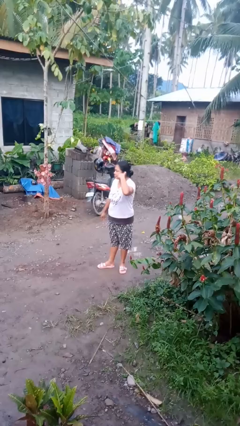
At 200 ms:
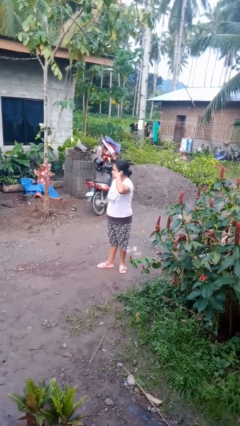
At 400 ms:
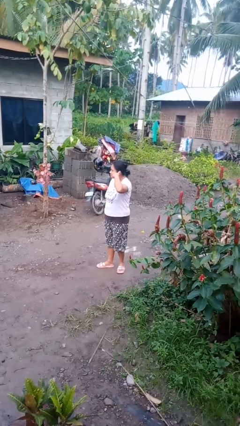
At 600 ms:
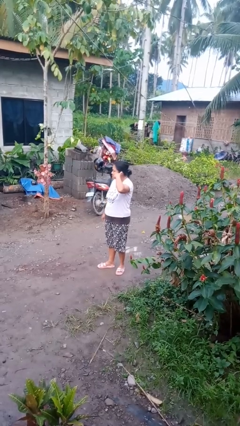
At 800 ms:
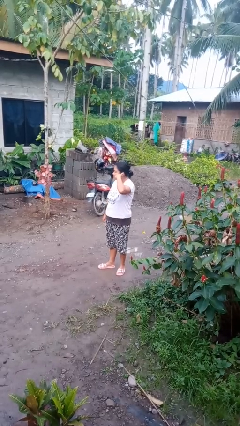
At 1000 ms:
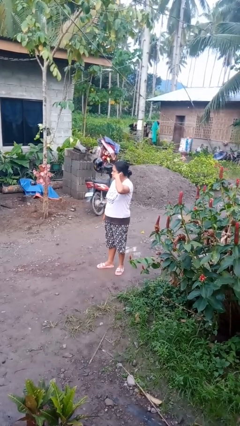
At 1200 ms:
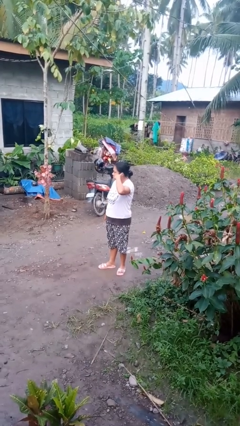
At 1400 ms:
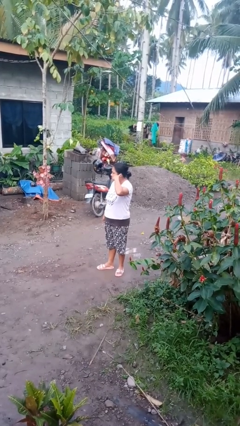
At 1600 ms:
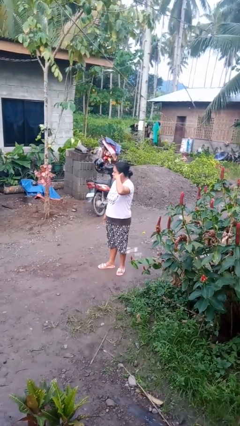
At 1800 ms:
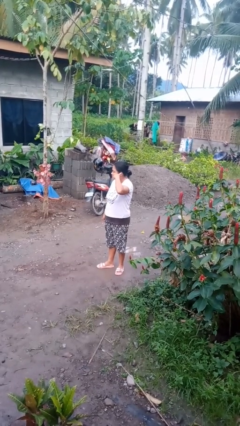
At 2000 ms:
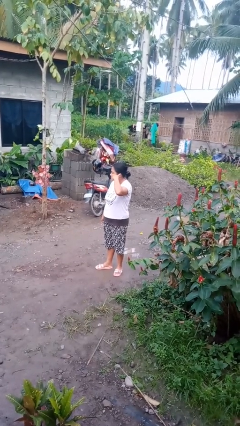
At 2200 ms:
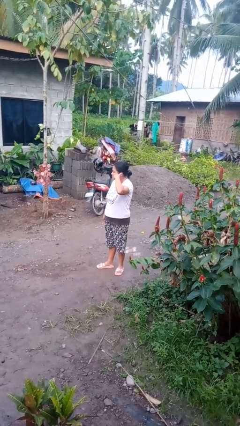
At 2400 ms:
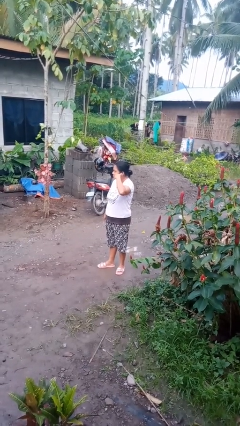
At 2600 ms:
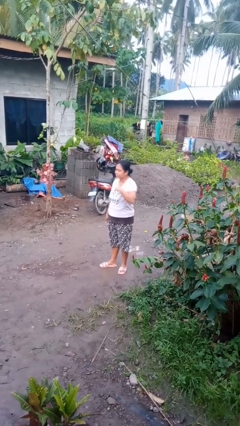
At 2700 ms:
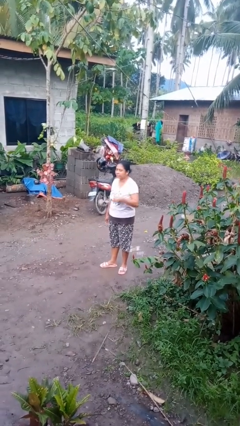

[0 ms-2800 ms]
person gestures call me

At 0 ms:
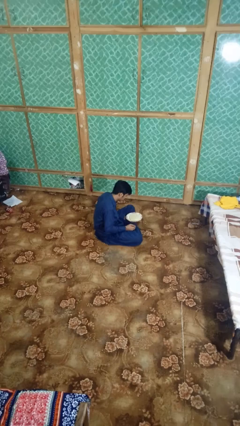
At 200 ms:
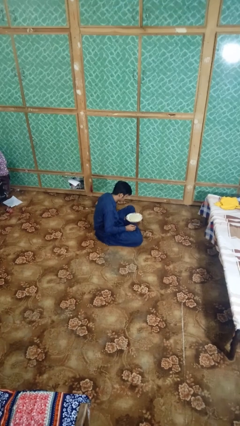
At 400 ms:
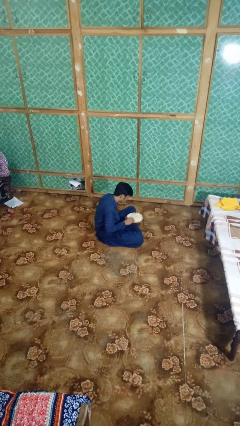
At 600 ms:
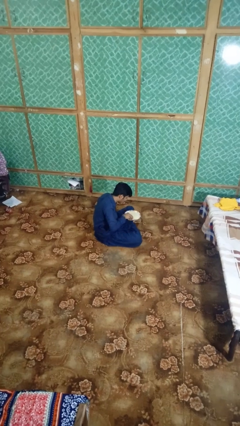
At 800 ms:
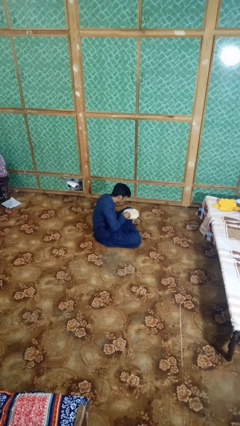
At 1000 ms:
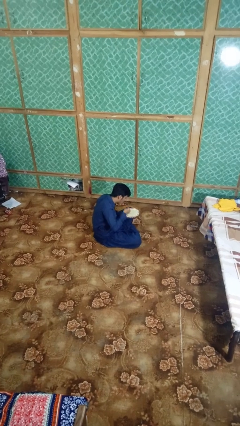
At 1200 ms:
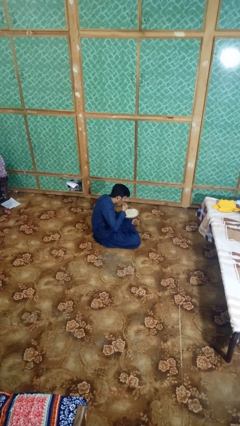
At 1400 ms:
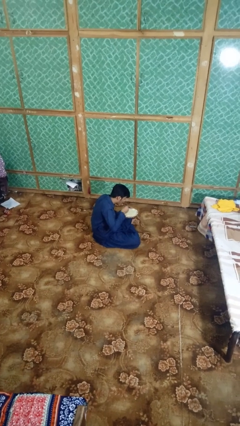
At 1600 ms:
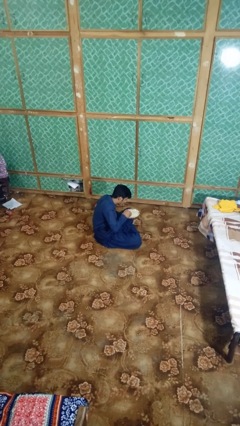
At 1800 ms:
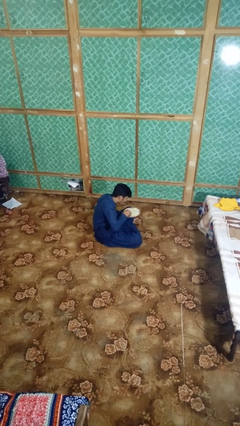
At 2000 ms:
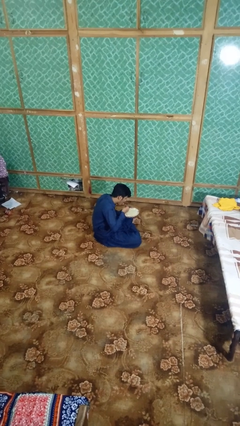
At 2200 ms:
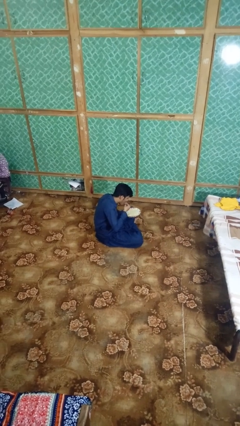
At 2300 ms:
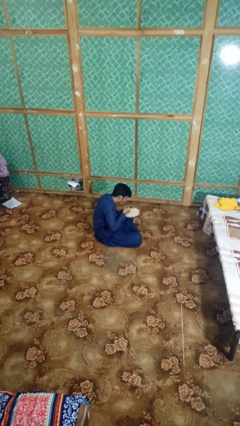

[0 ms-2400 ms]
person eats with hands

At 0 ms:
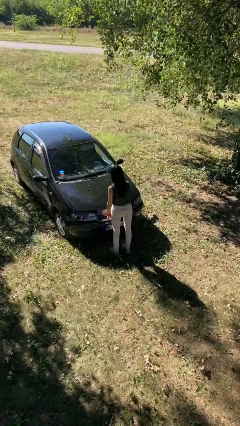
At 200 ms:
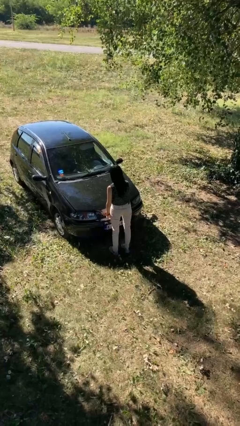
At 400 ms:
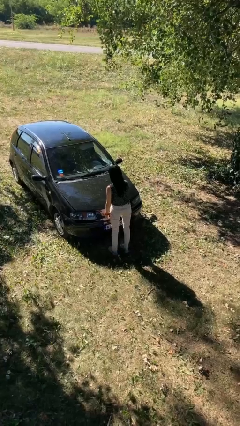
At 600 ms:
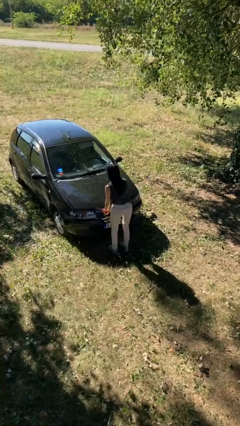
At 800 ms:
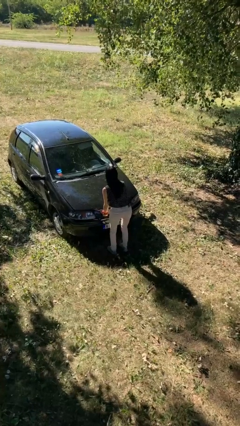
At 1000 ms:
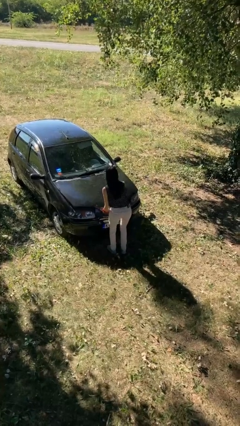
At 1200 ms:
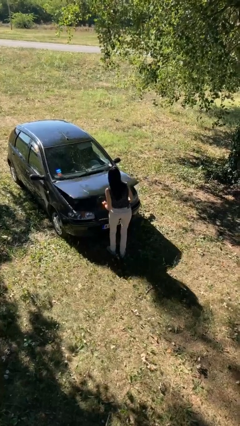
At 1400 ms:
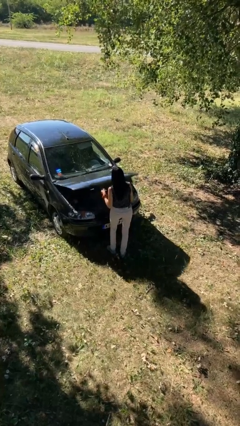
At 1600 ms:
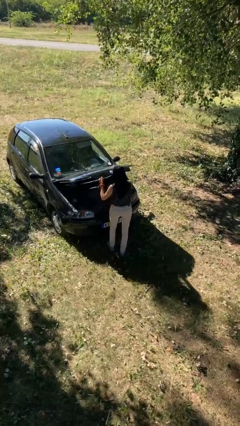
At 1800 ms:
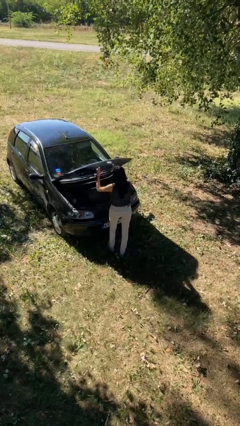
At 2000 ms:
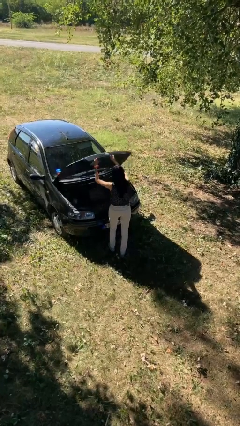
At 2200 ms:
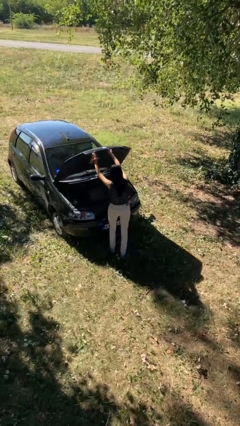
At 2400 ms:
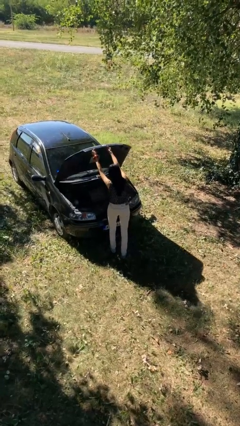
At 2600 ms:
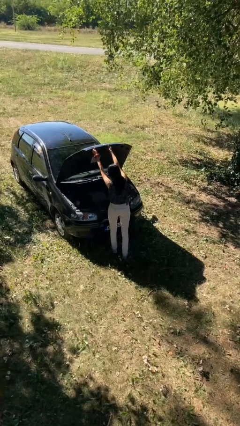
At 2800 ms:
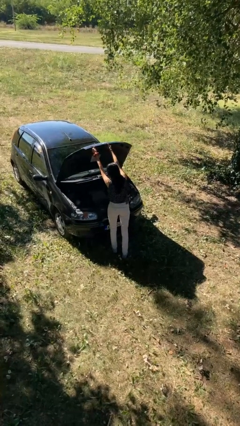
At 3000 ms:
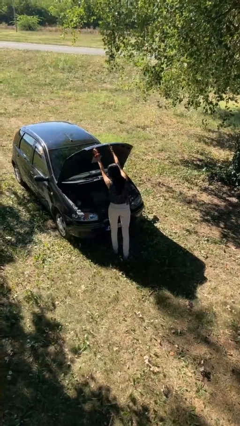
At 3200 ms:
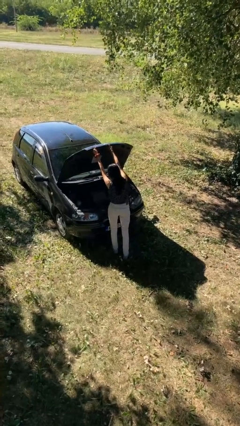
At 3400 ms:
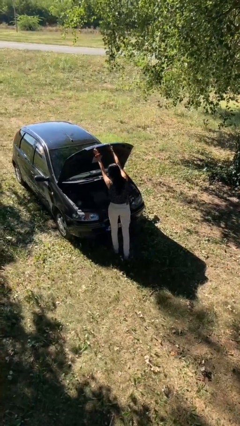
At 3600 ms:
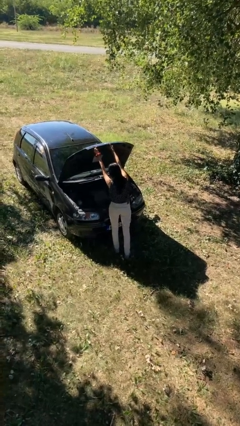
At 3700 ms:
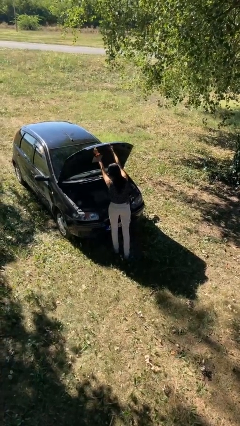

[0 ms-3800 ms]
person opens car hood

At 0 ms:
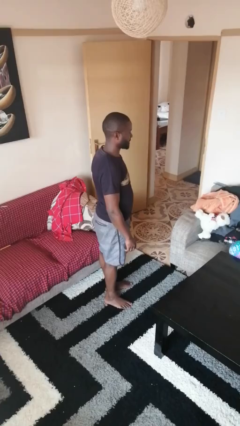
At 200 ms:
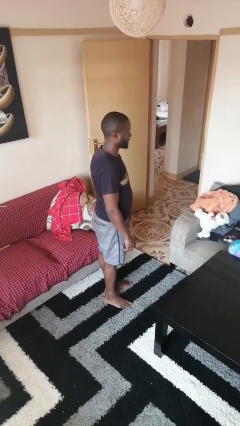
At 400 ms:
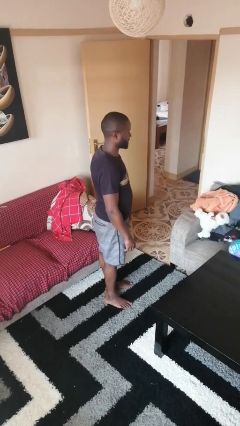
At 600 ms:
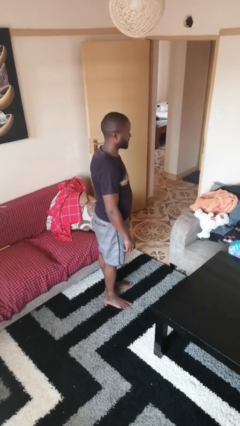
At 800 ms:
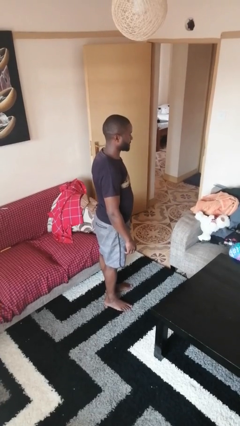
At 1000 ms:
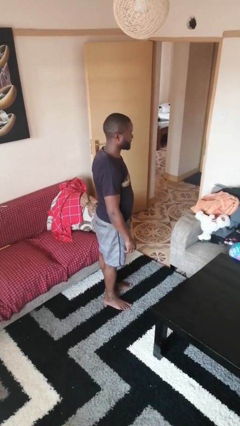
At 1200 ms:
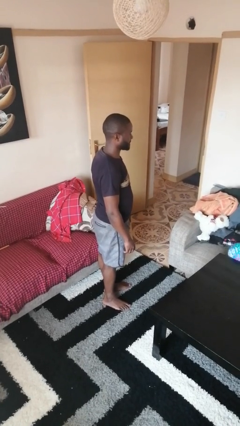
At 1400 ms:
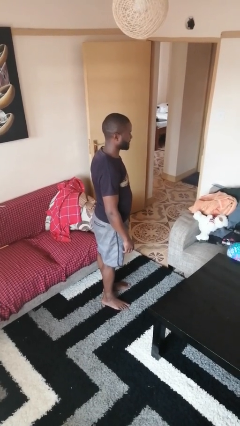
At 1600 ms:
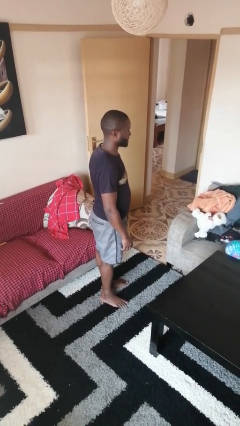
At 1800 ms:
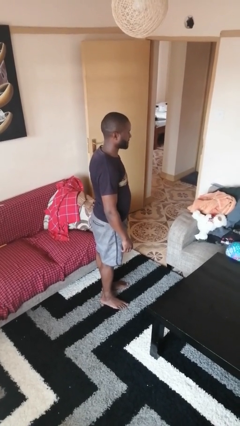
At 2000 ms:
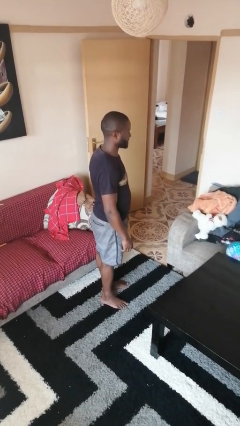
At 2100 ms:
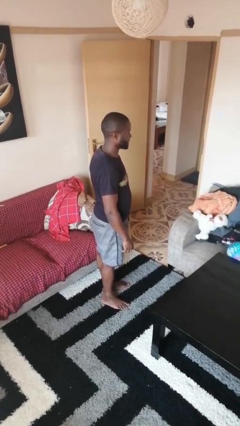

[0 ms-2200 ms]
person swats bug

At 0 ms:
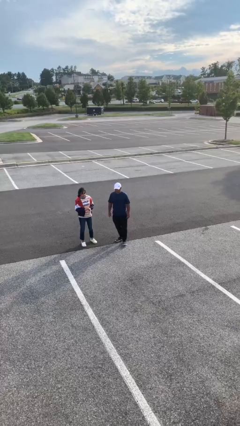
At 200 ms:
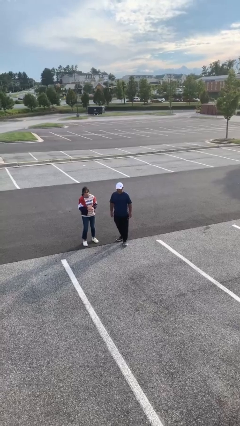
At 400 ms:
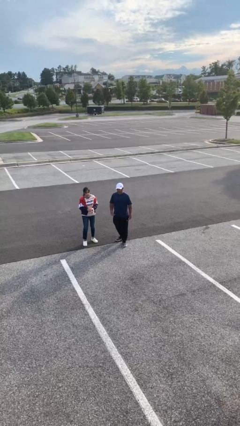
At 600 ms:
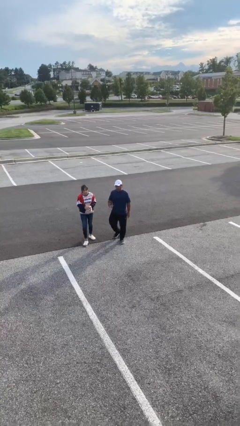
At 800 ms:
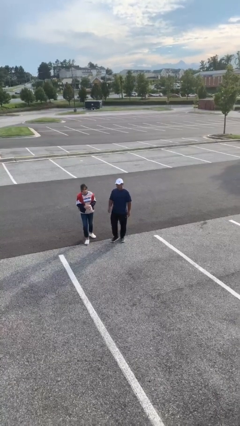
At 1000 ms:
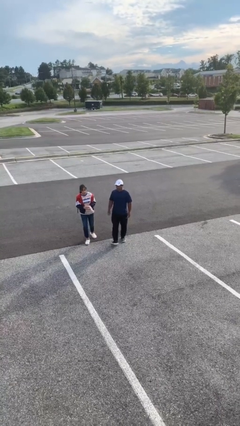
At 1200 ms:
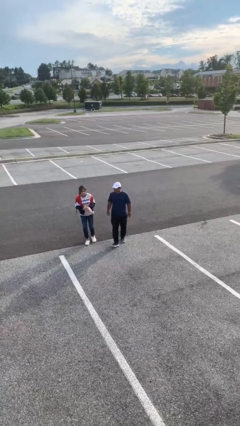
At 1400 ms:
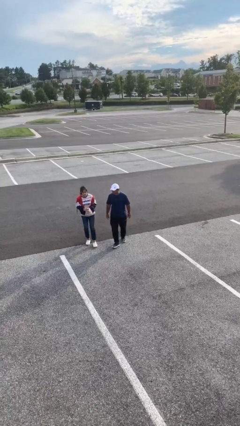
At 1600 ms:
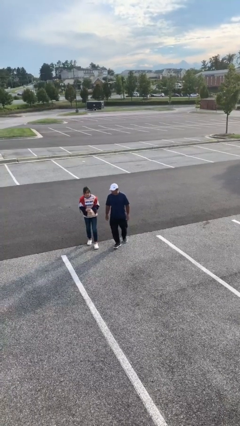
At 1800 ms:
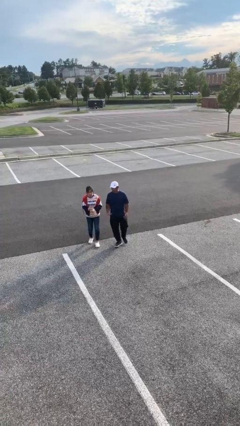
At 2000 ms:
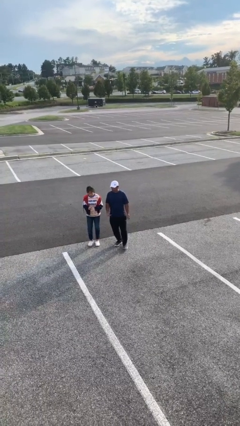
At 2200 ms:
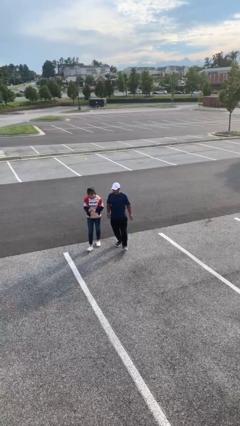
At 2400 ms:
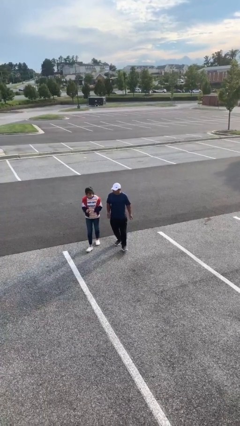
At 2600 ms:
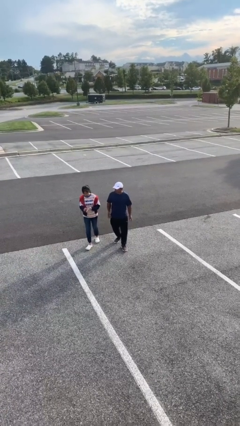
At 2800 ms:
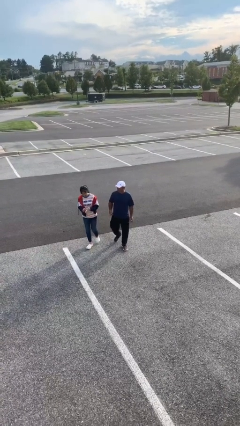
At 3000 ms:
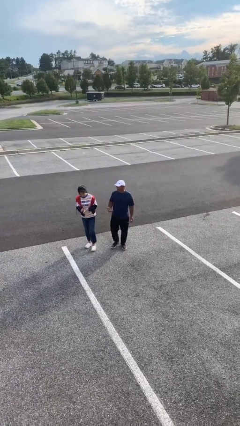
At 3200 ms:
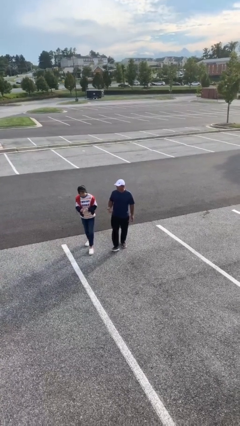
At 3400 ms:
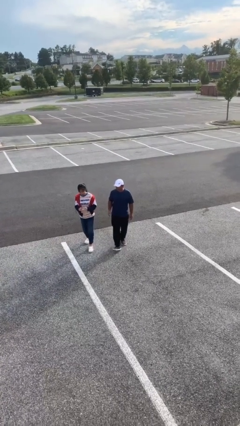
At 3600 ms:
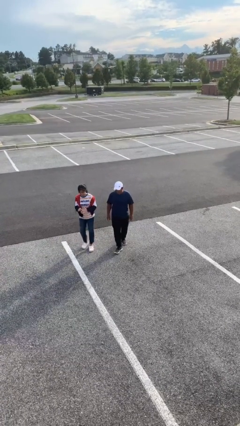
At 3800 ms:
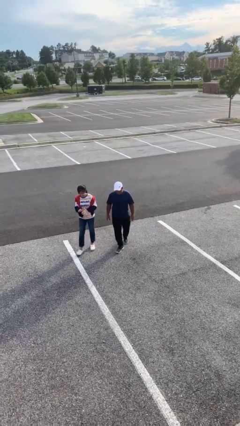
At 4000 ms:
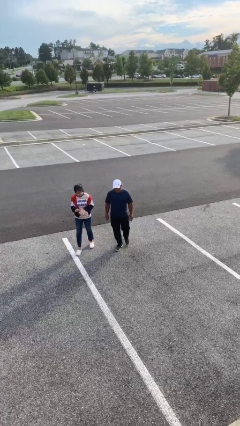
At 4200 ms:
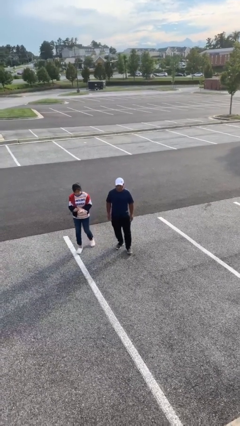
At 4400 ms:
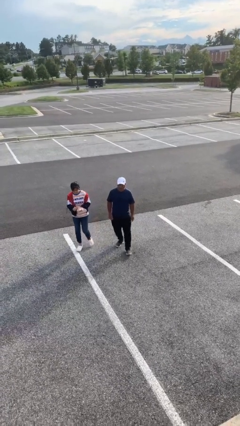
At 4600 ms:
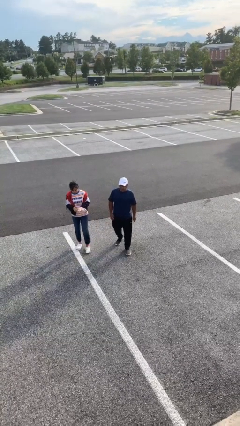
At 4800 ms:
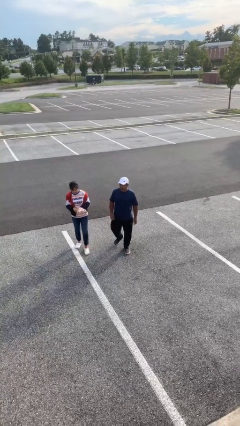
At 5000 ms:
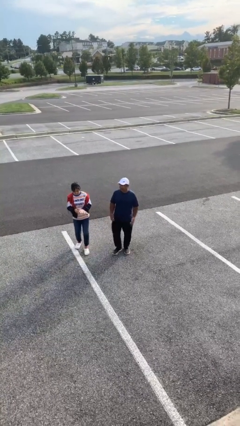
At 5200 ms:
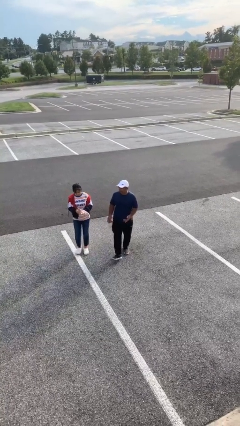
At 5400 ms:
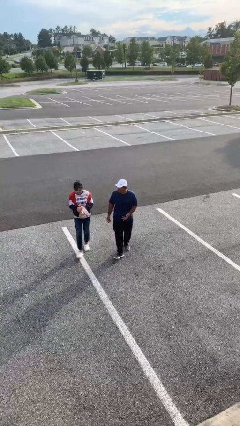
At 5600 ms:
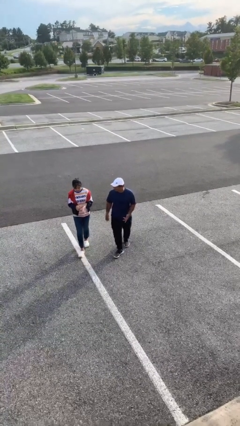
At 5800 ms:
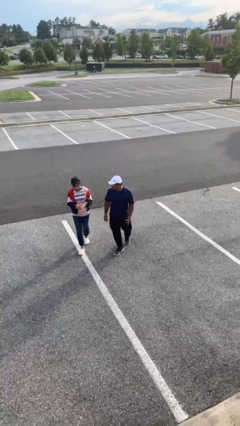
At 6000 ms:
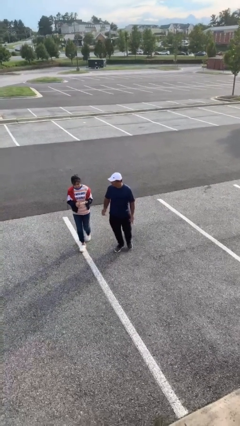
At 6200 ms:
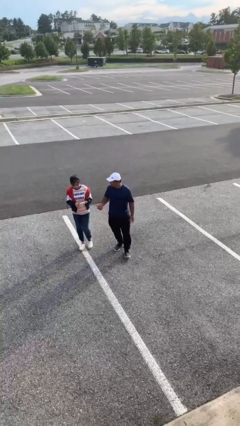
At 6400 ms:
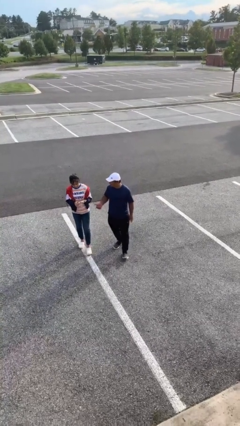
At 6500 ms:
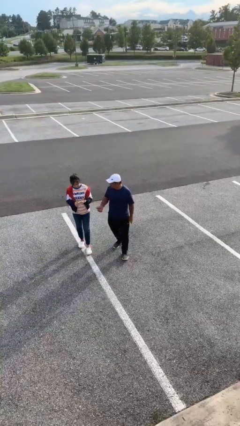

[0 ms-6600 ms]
person talks to person
